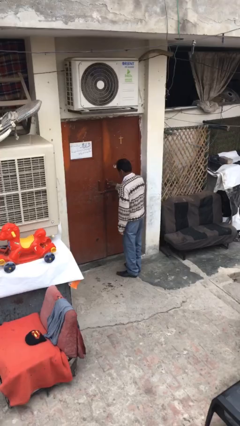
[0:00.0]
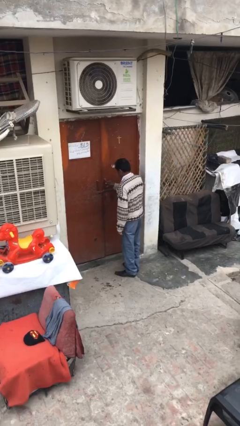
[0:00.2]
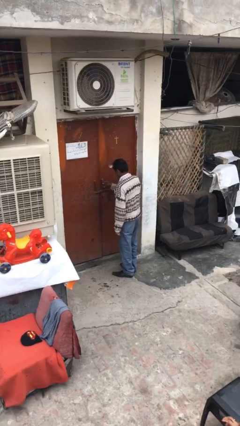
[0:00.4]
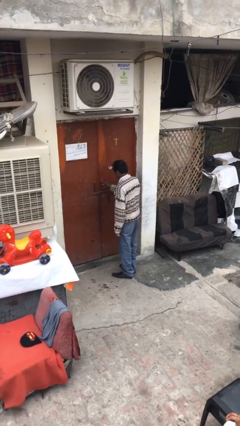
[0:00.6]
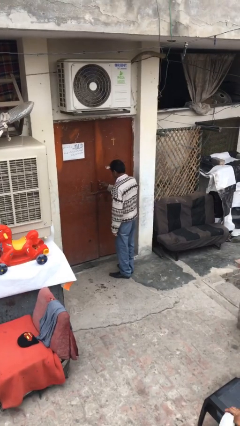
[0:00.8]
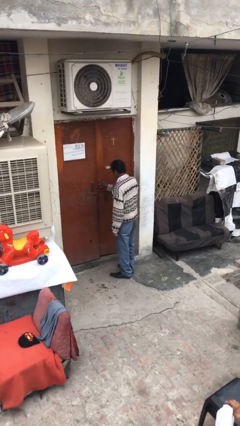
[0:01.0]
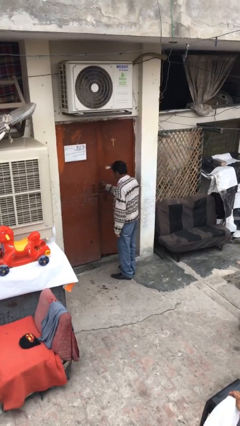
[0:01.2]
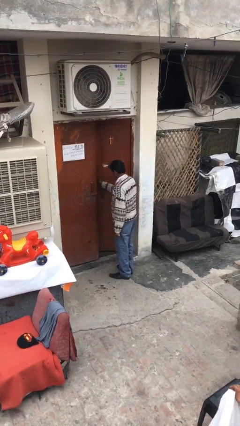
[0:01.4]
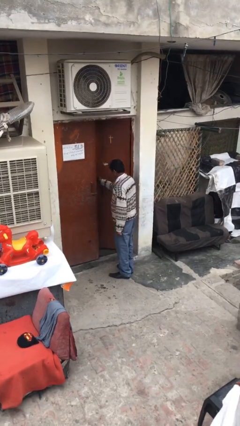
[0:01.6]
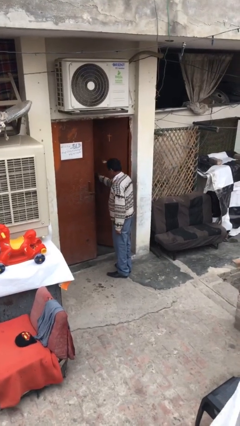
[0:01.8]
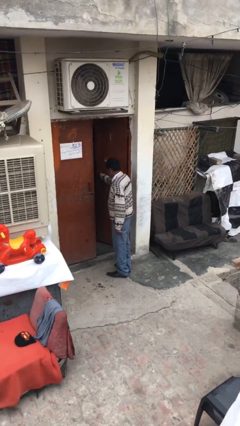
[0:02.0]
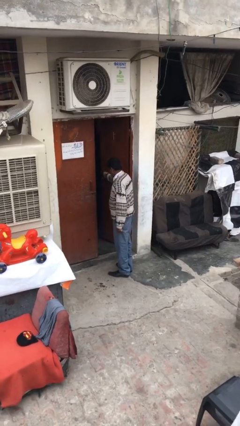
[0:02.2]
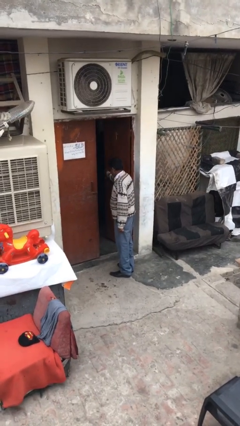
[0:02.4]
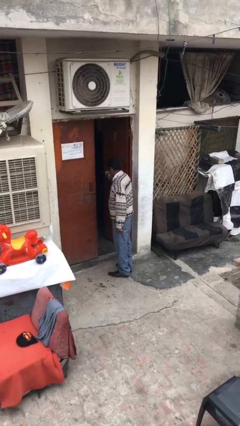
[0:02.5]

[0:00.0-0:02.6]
person opens facility door

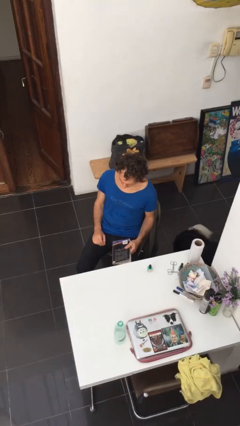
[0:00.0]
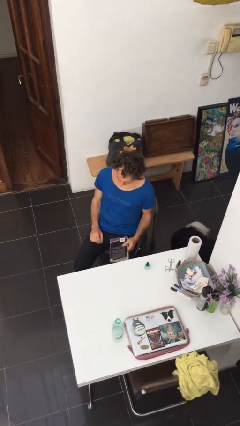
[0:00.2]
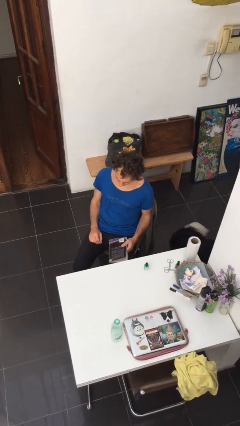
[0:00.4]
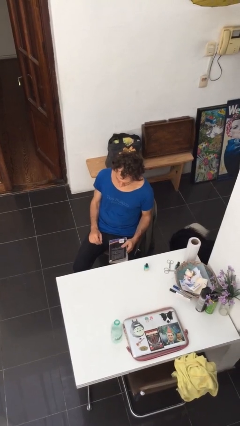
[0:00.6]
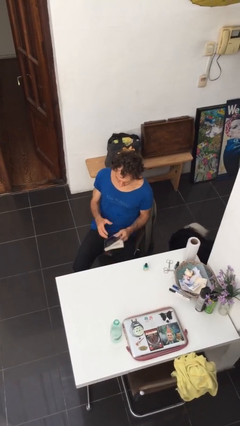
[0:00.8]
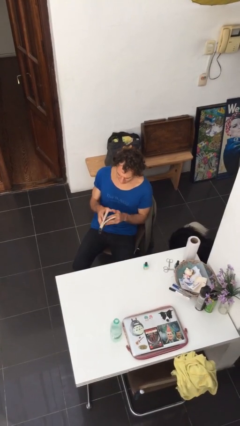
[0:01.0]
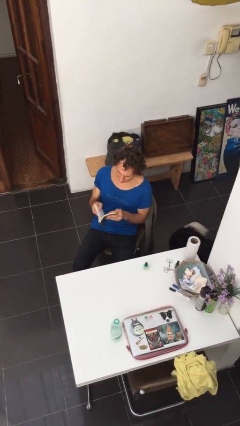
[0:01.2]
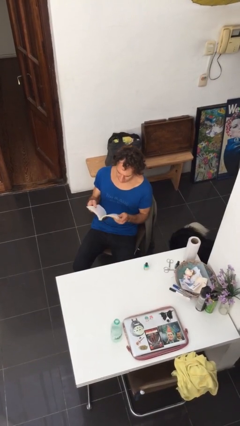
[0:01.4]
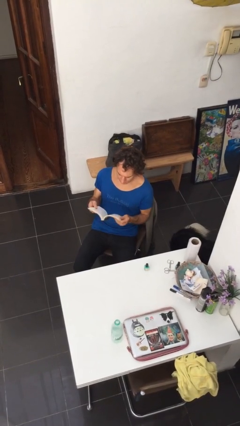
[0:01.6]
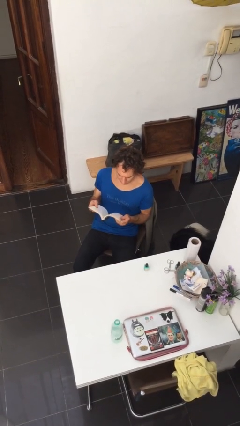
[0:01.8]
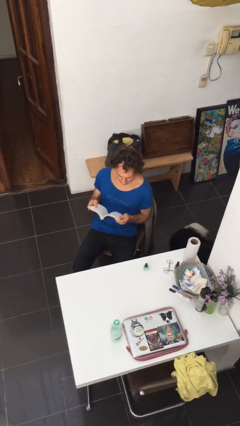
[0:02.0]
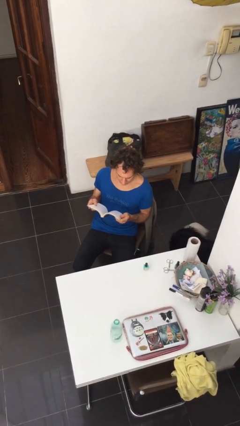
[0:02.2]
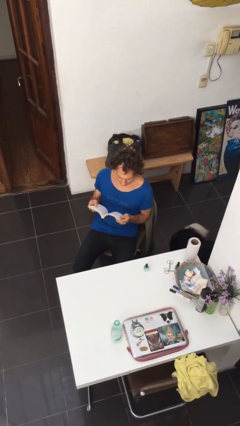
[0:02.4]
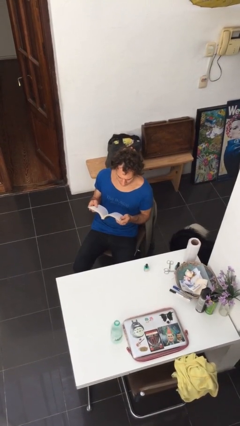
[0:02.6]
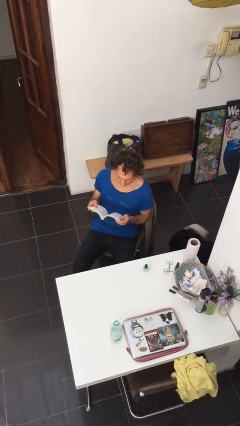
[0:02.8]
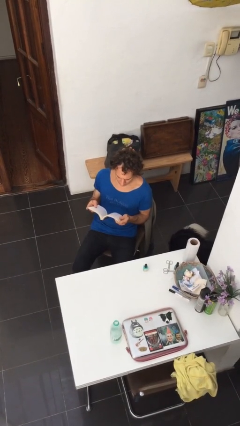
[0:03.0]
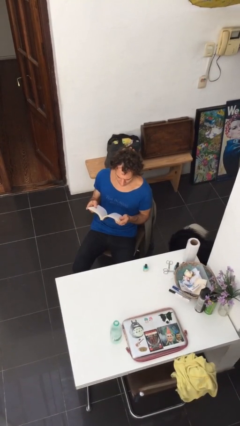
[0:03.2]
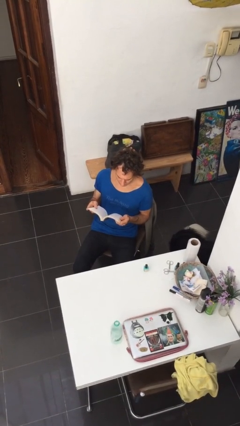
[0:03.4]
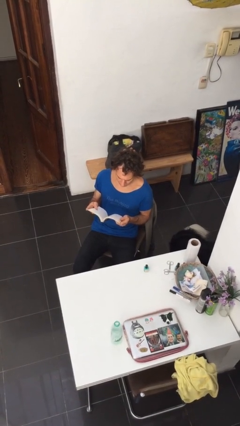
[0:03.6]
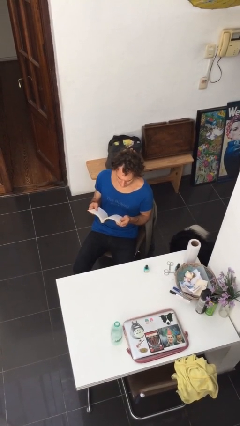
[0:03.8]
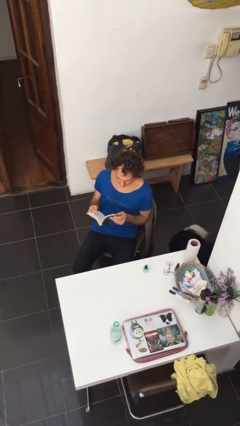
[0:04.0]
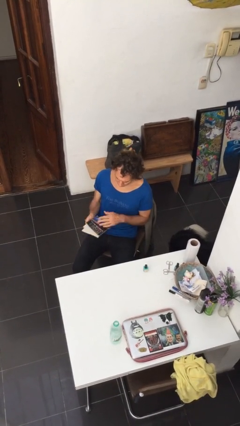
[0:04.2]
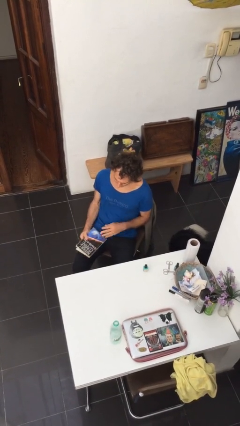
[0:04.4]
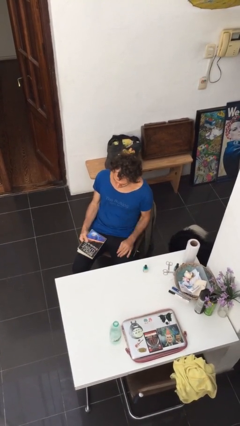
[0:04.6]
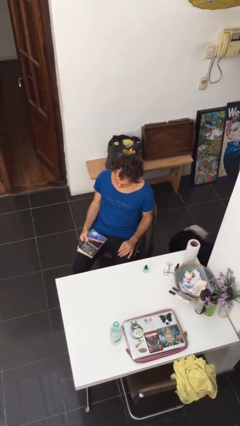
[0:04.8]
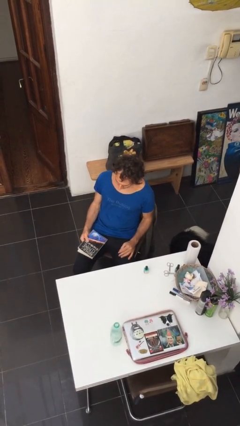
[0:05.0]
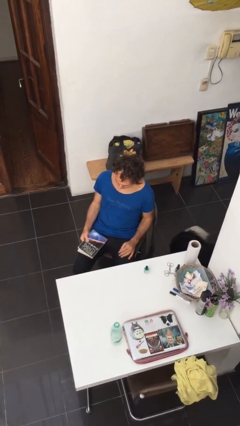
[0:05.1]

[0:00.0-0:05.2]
person reads document

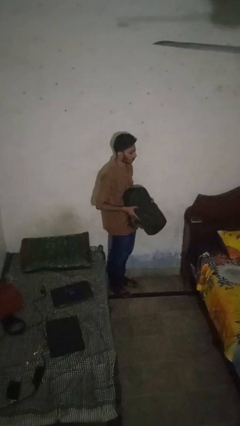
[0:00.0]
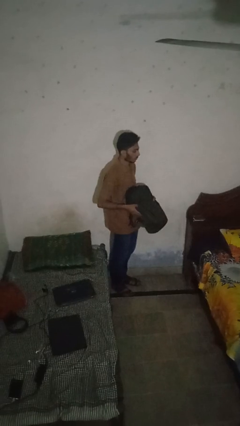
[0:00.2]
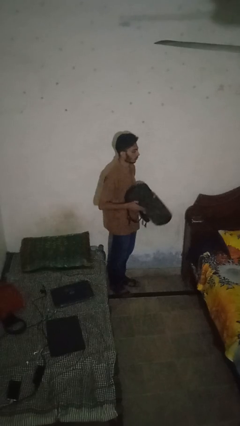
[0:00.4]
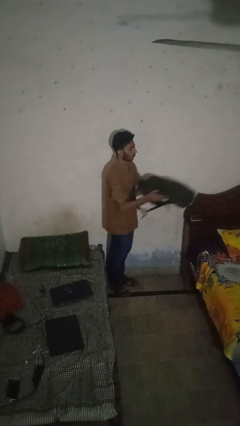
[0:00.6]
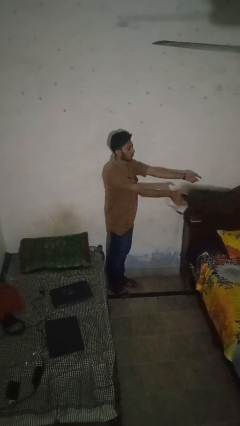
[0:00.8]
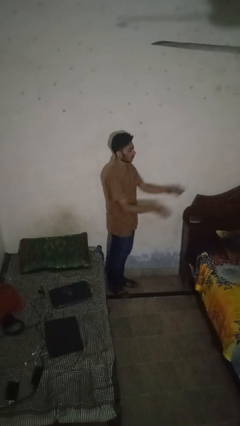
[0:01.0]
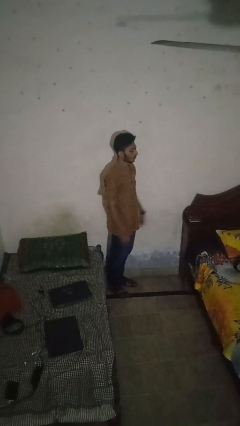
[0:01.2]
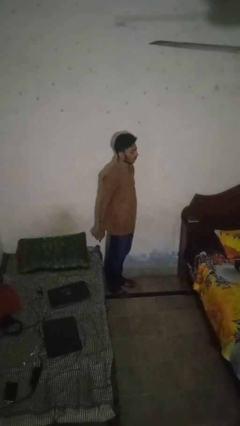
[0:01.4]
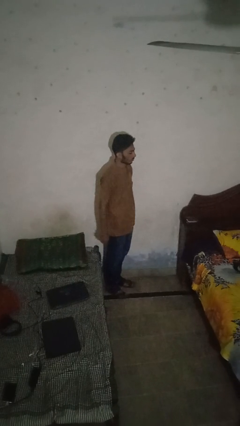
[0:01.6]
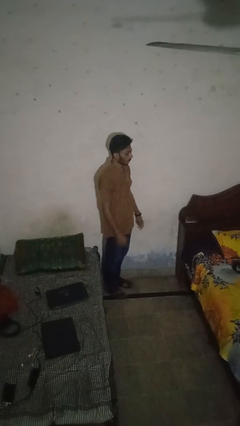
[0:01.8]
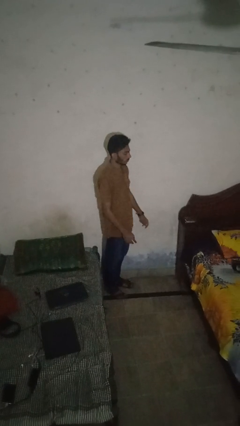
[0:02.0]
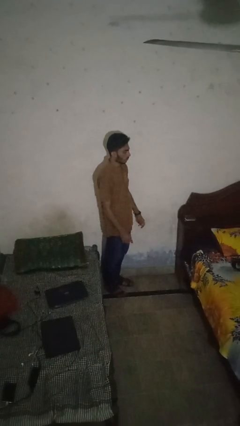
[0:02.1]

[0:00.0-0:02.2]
person throws object on bed

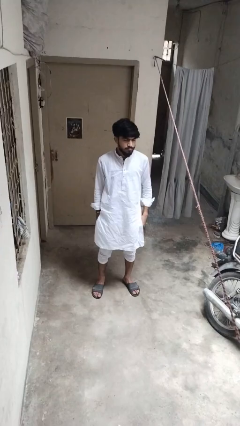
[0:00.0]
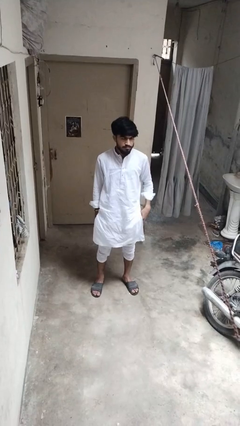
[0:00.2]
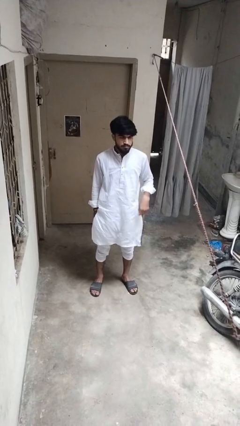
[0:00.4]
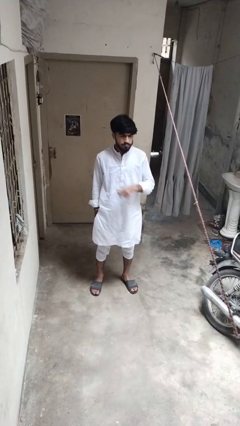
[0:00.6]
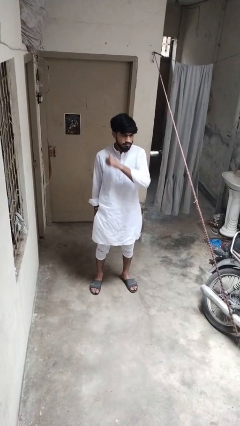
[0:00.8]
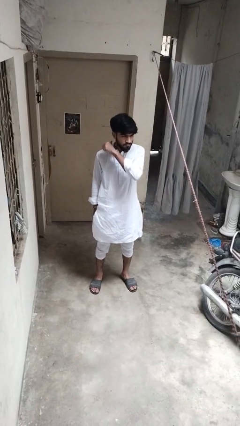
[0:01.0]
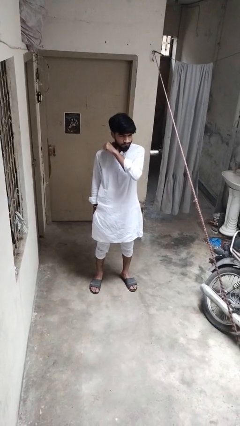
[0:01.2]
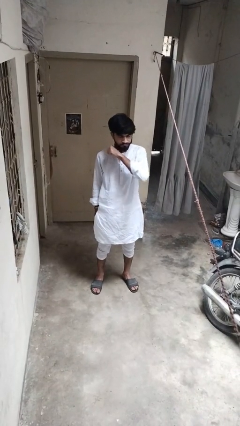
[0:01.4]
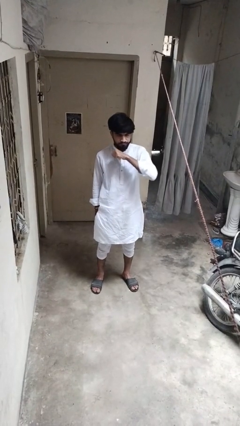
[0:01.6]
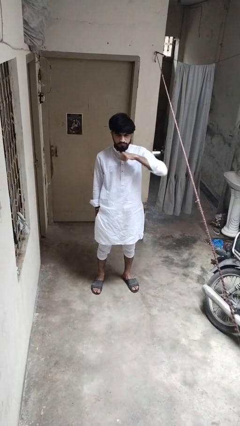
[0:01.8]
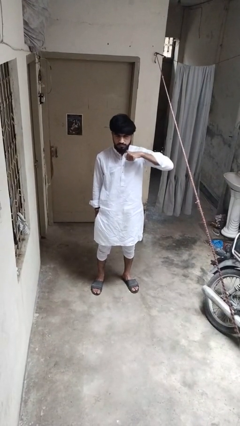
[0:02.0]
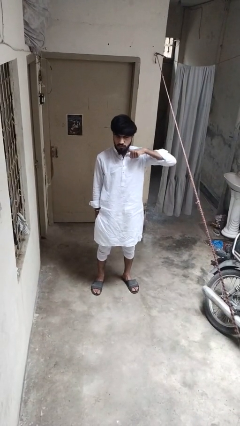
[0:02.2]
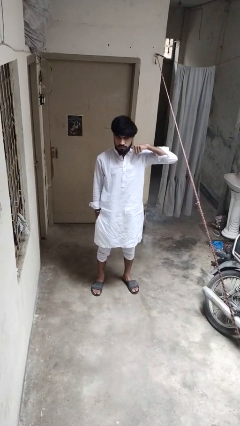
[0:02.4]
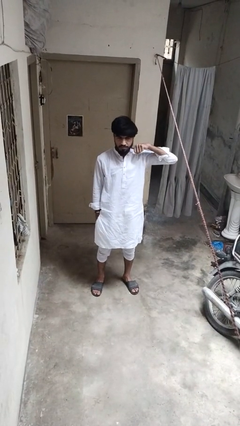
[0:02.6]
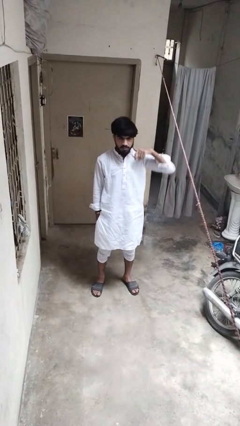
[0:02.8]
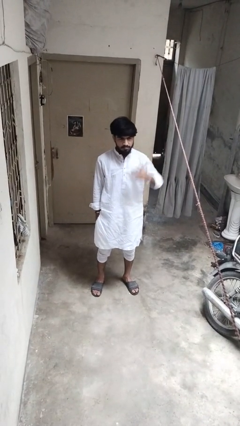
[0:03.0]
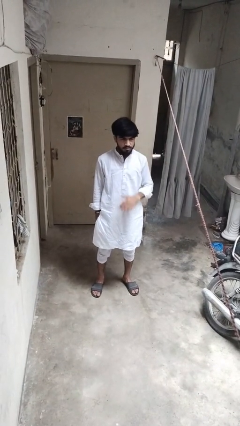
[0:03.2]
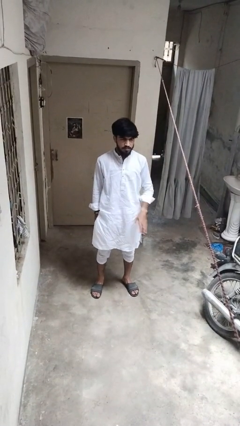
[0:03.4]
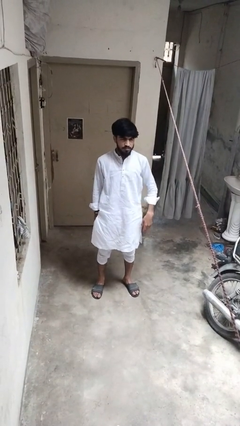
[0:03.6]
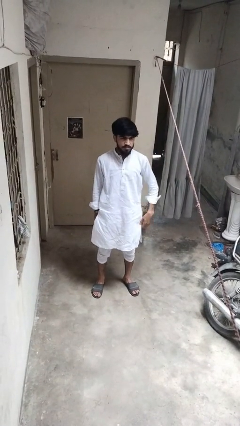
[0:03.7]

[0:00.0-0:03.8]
person gestures cut

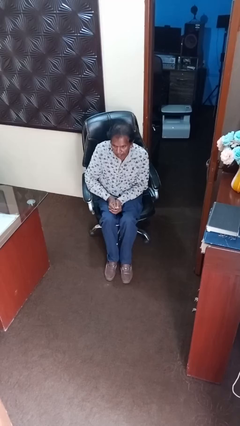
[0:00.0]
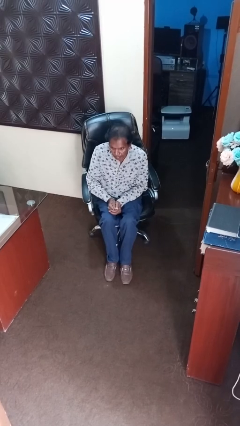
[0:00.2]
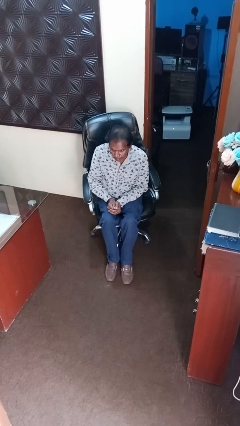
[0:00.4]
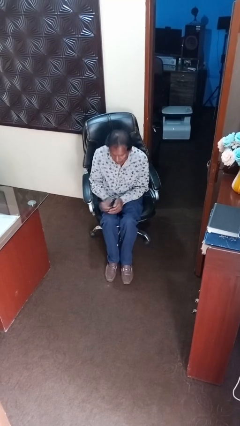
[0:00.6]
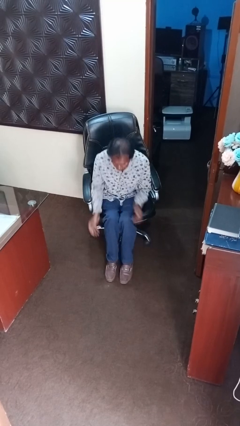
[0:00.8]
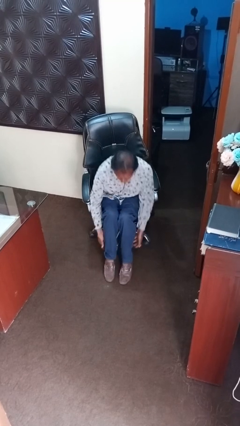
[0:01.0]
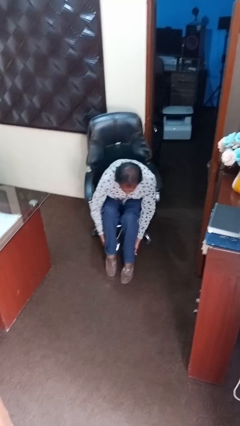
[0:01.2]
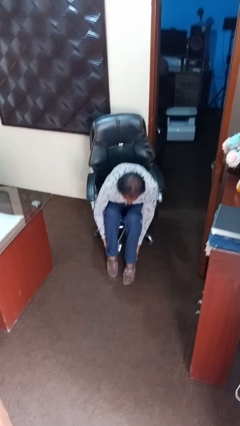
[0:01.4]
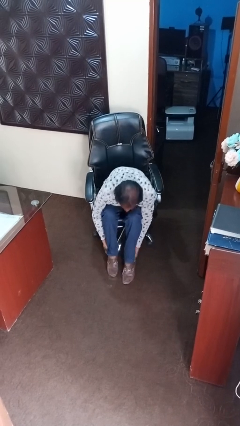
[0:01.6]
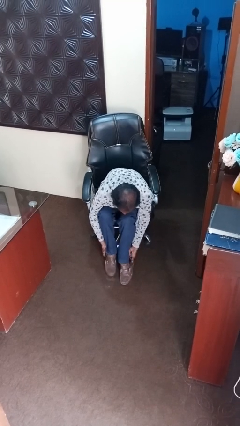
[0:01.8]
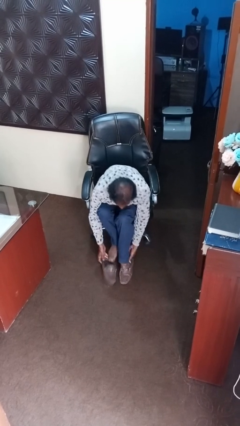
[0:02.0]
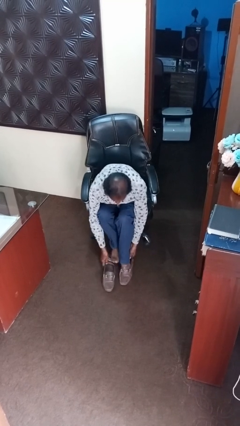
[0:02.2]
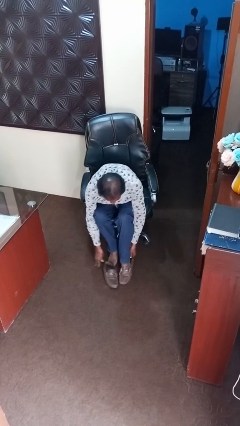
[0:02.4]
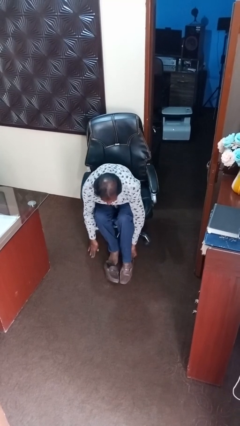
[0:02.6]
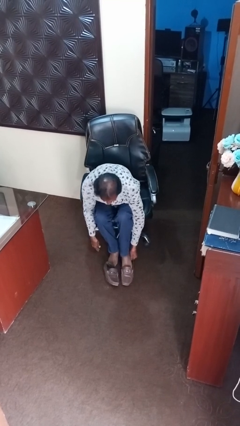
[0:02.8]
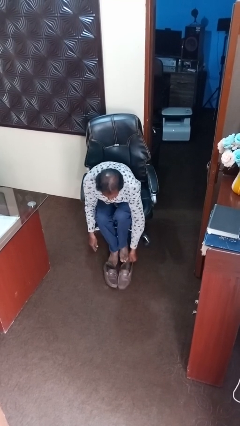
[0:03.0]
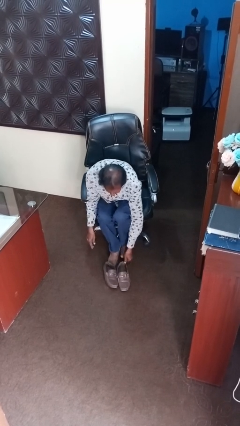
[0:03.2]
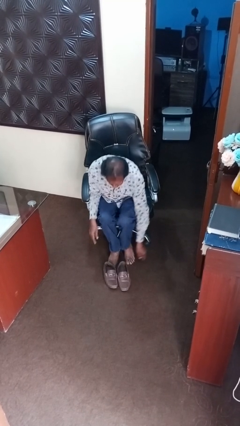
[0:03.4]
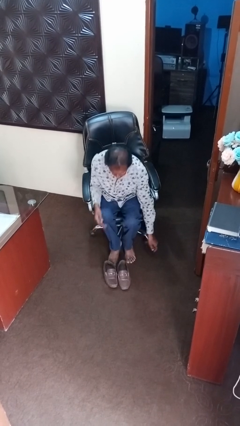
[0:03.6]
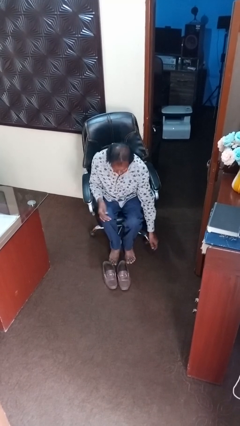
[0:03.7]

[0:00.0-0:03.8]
person takes off shoes
